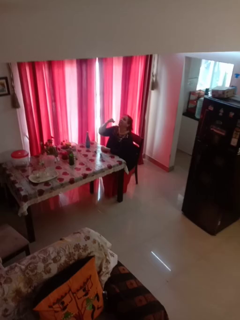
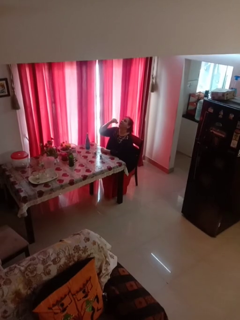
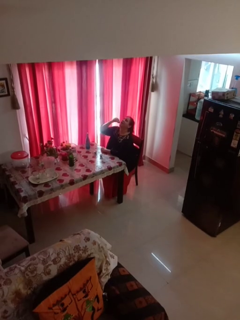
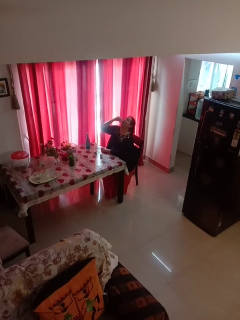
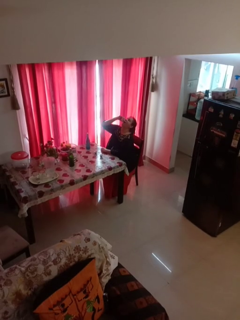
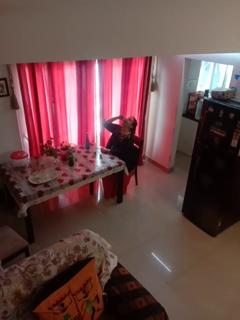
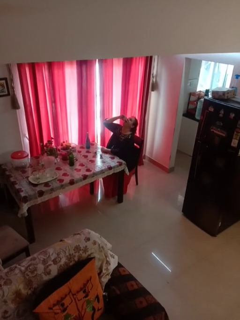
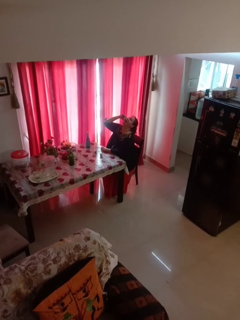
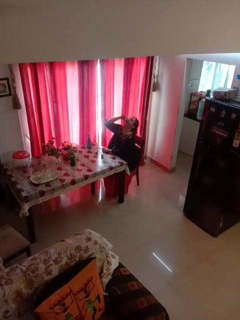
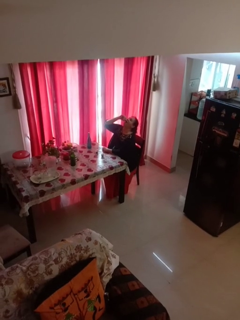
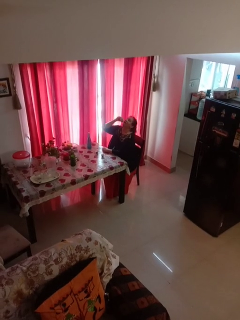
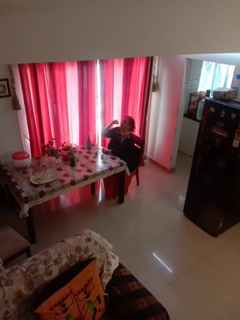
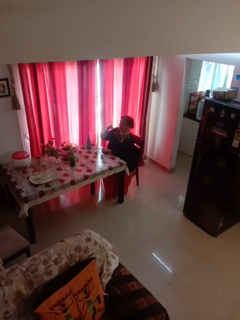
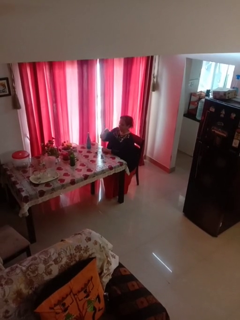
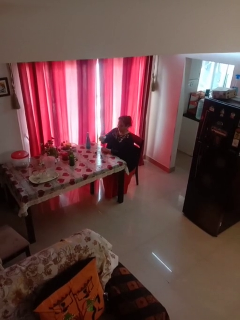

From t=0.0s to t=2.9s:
person drinks from shotglass

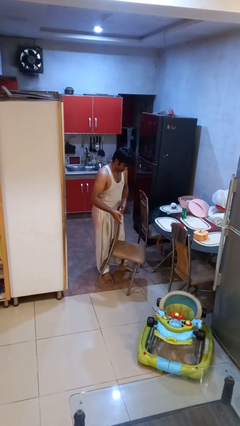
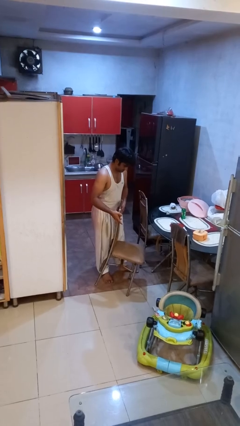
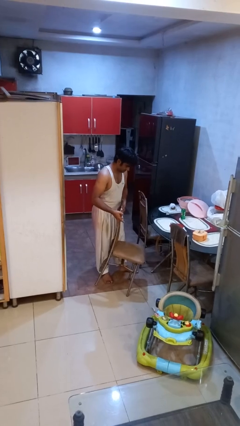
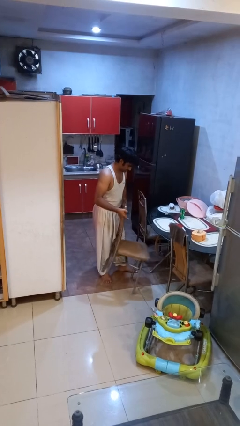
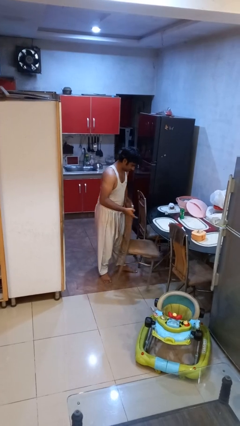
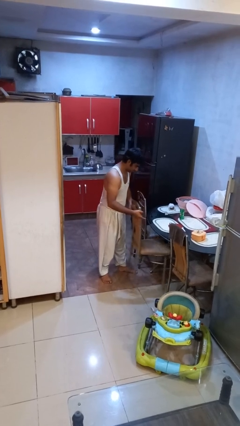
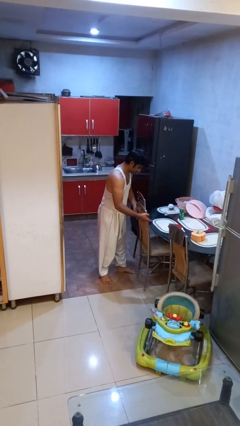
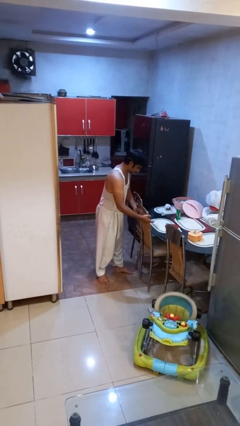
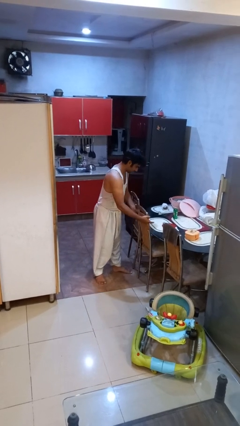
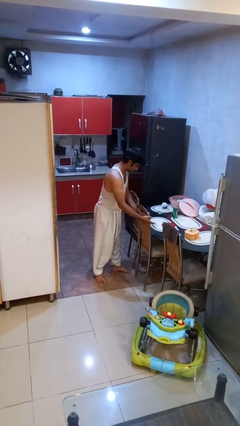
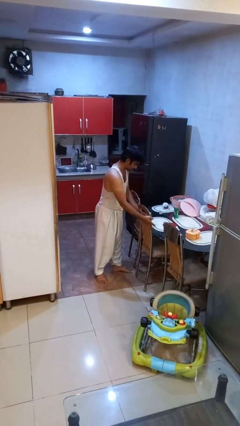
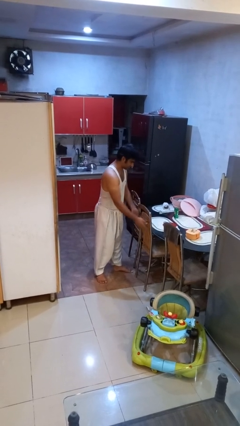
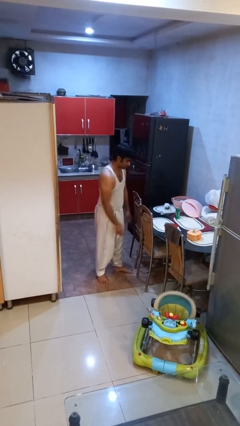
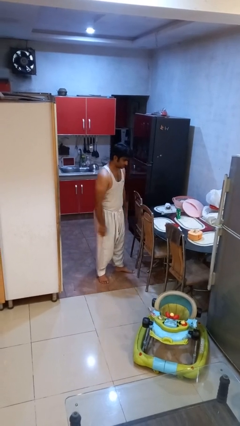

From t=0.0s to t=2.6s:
person pushes in chair

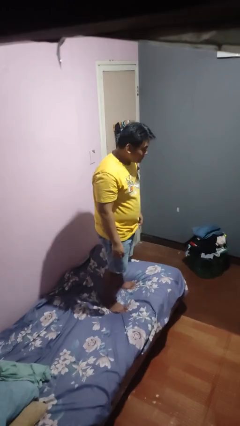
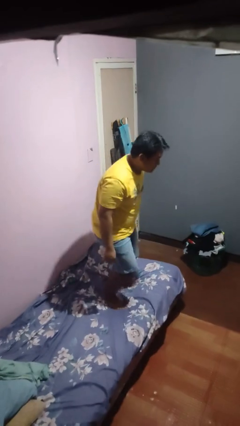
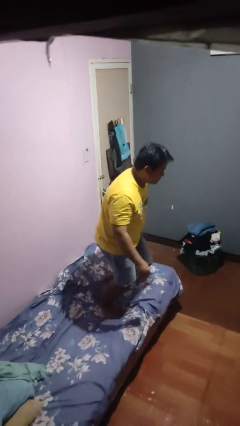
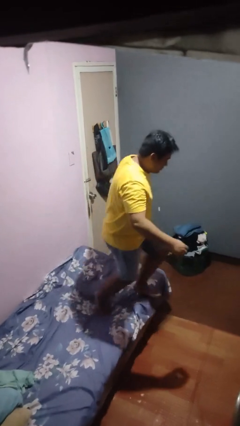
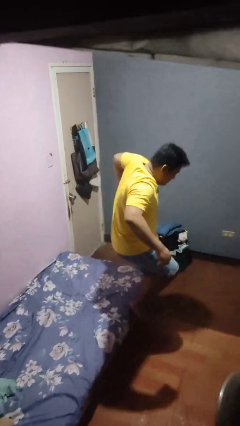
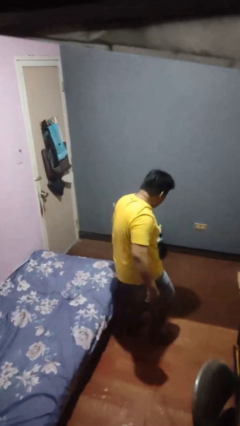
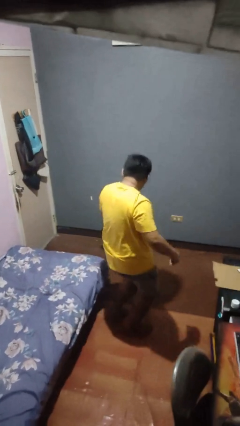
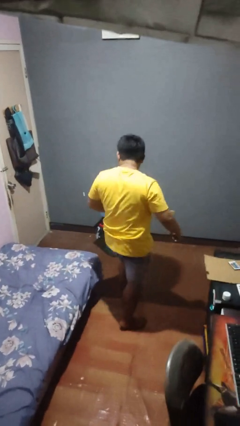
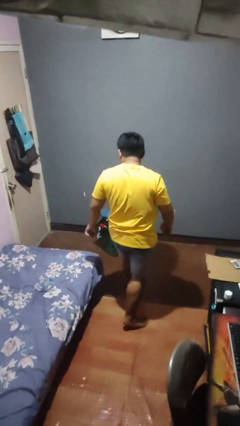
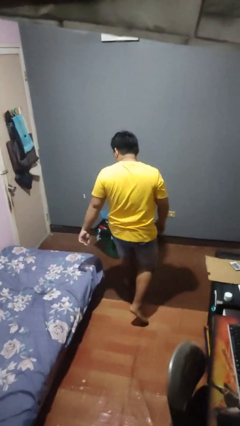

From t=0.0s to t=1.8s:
person jumps on bed

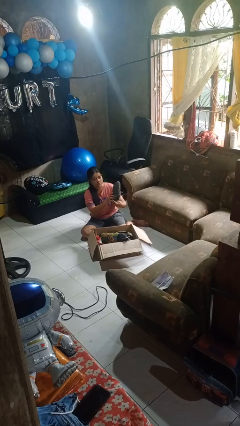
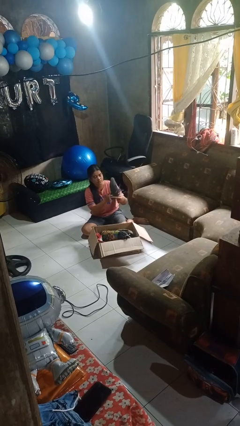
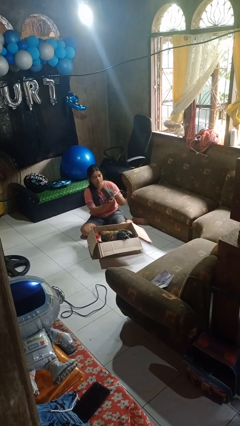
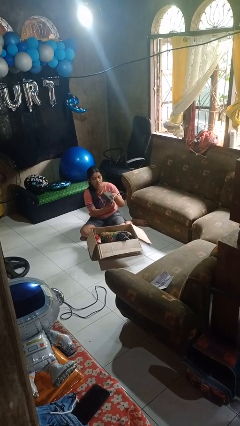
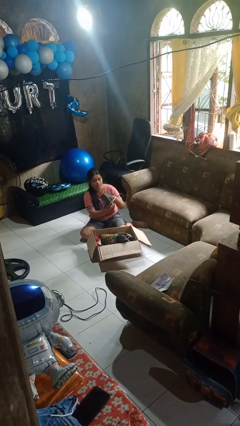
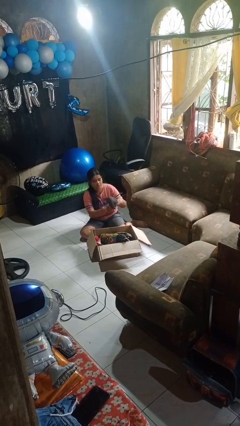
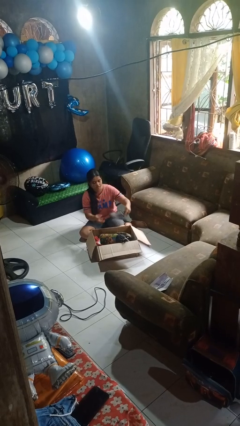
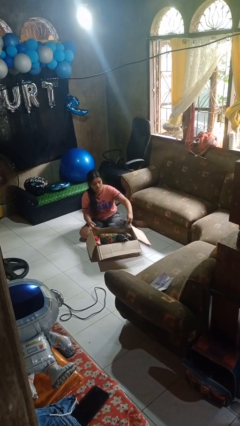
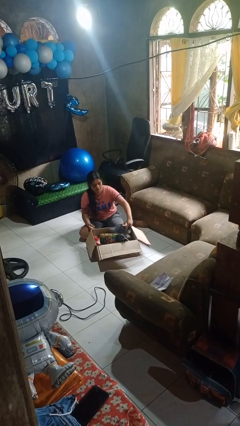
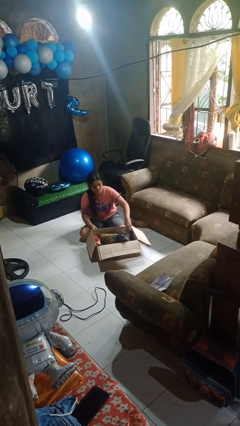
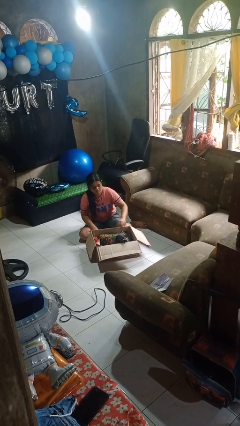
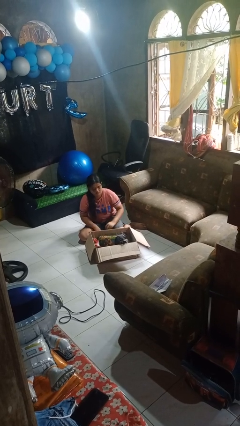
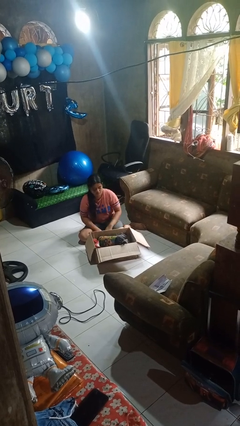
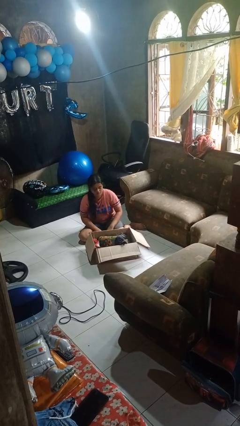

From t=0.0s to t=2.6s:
person puts object into box

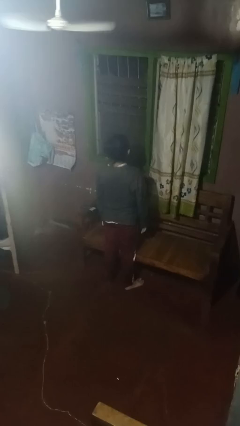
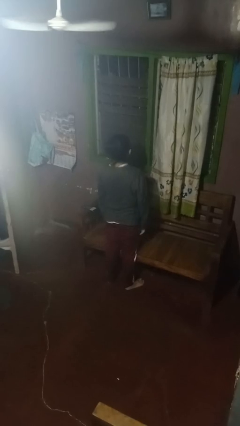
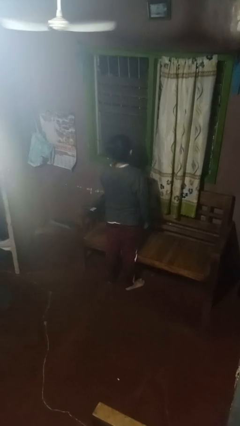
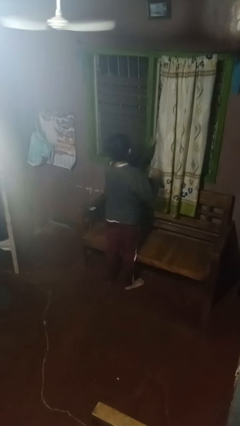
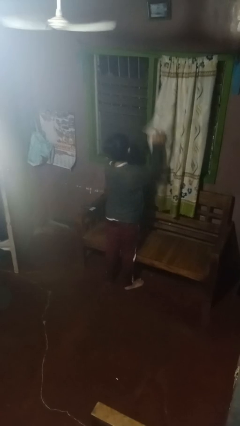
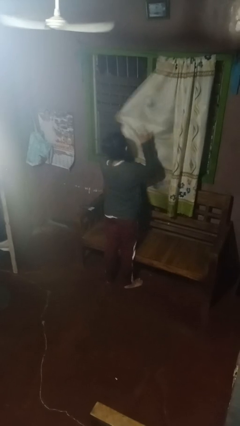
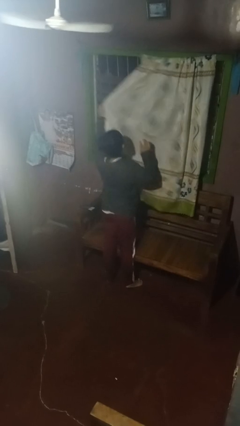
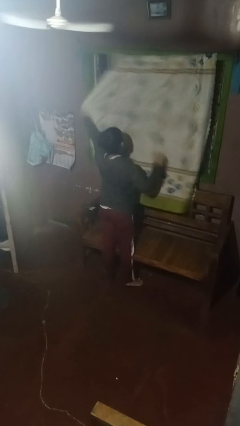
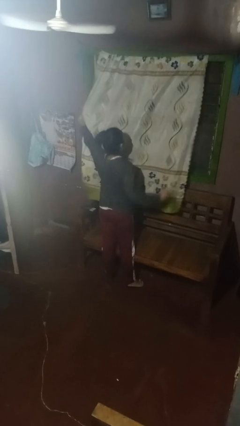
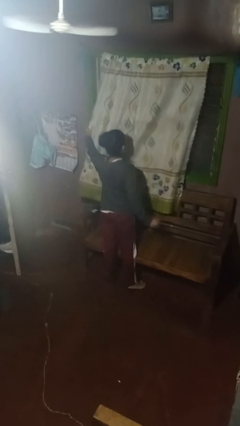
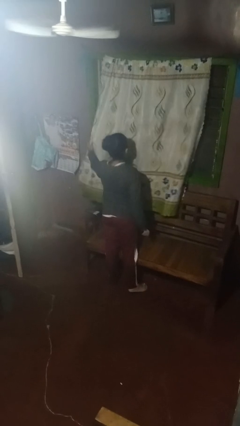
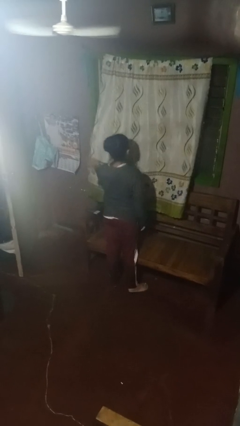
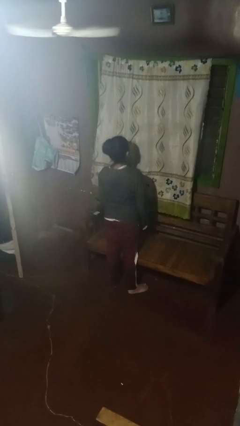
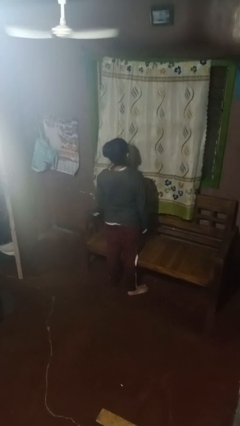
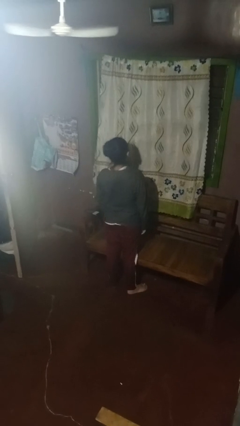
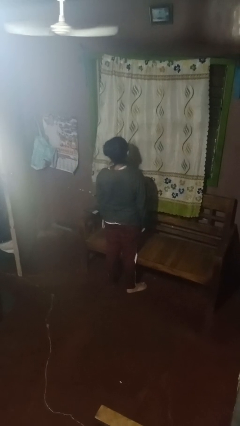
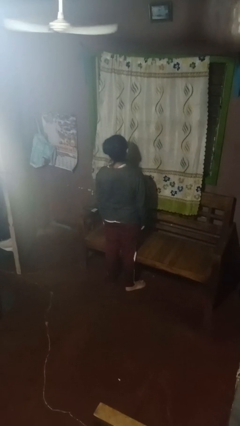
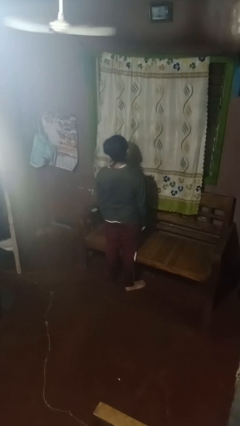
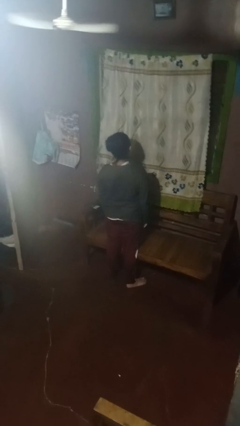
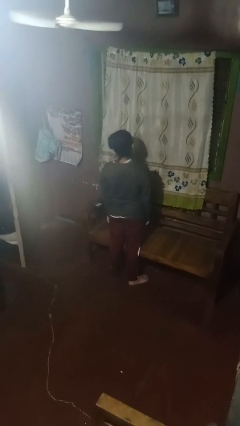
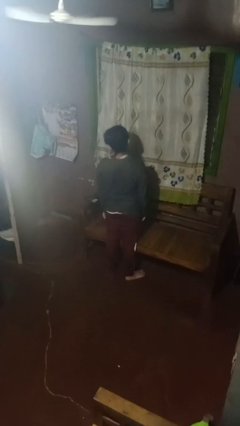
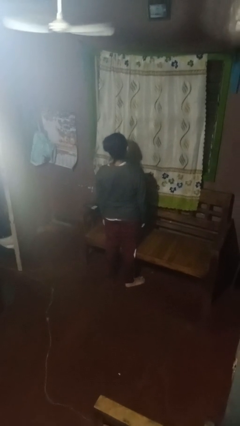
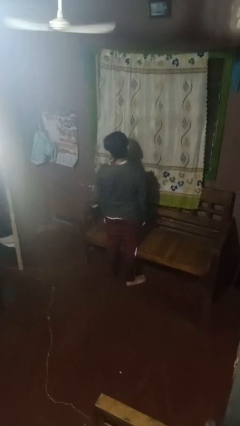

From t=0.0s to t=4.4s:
person closes curtains

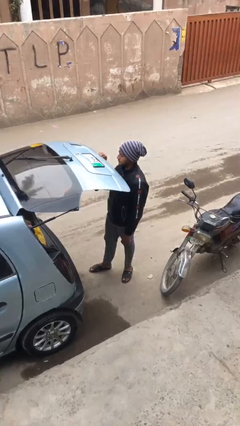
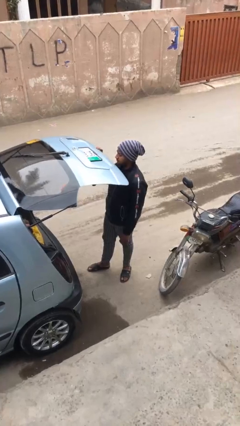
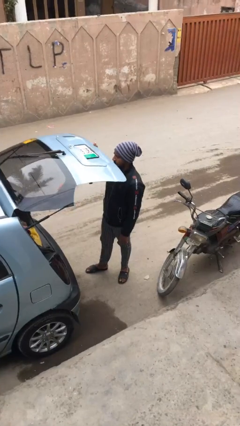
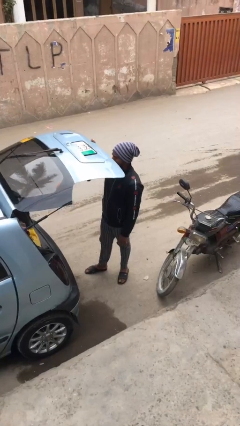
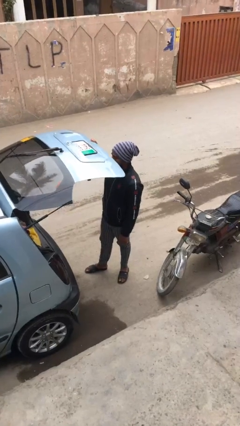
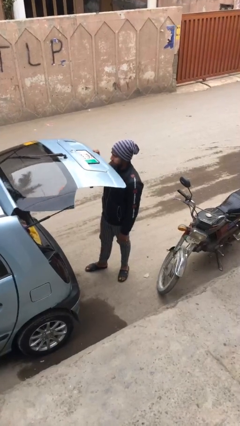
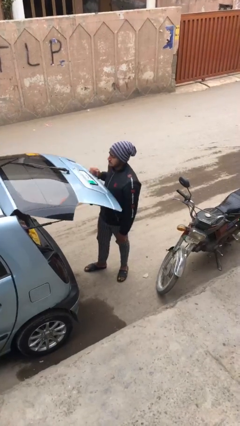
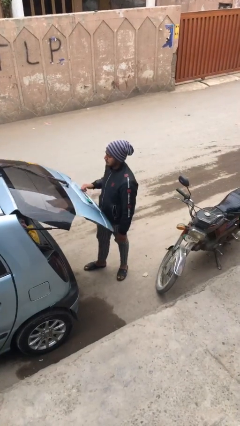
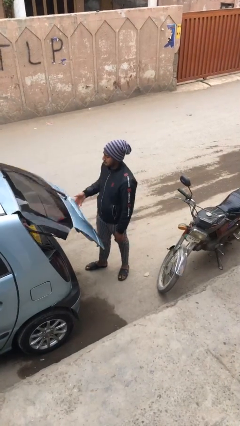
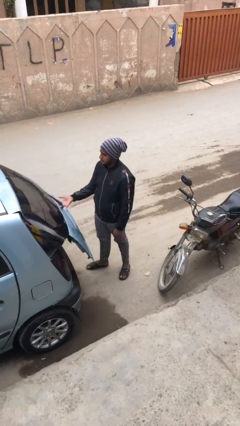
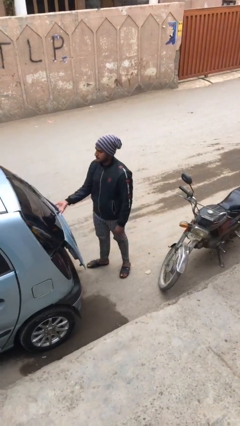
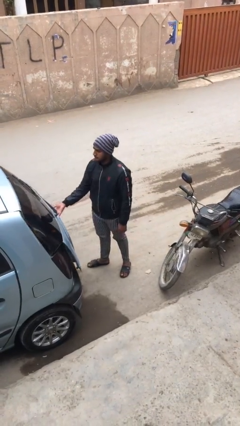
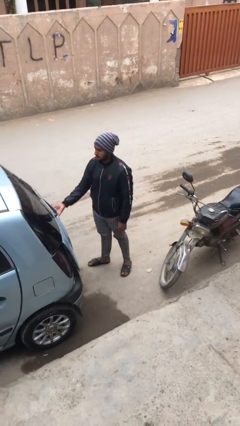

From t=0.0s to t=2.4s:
person closes car trunk

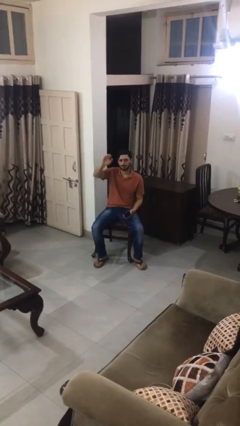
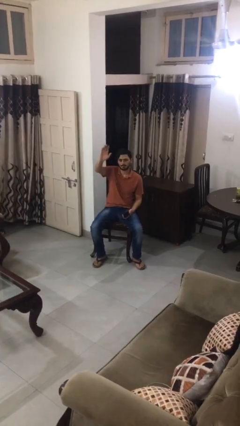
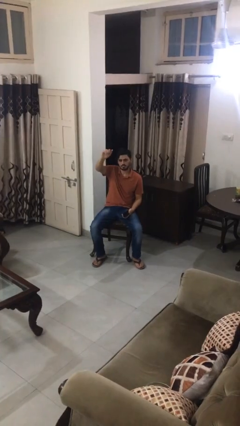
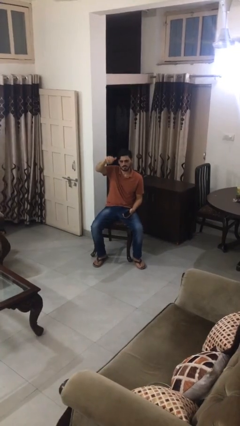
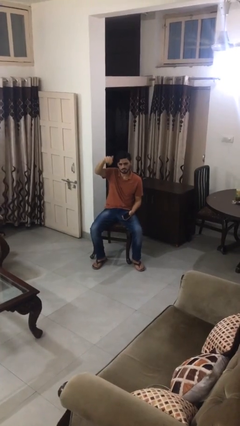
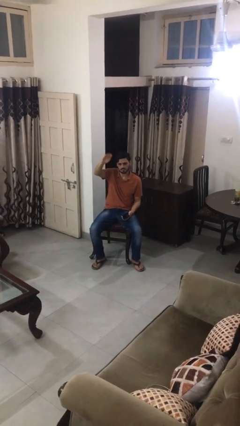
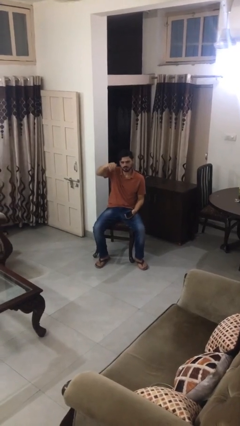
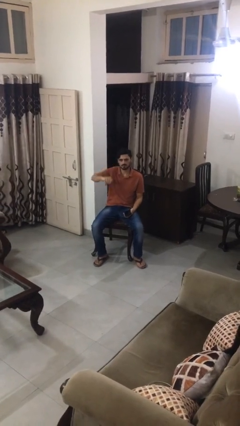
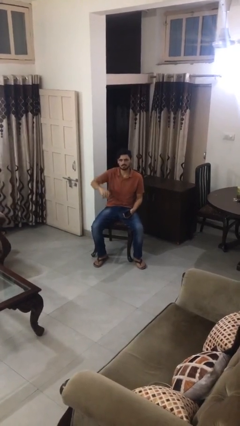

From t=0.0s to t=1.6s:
person gestures come here
